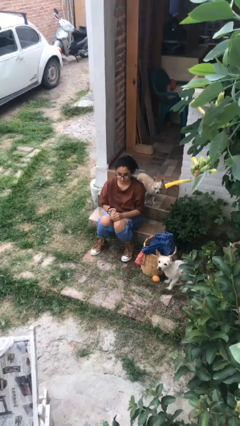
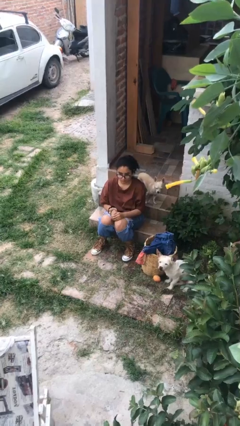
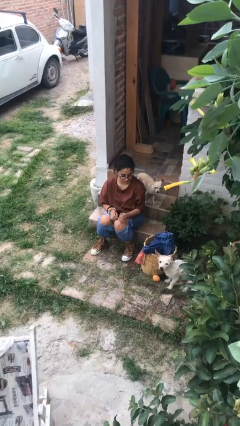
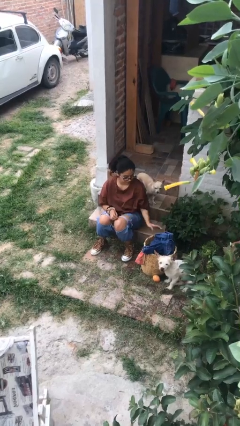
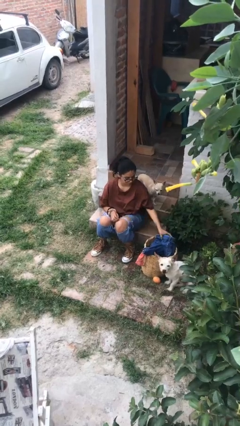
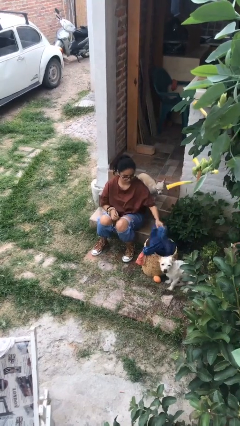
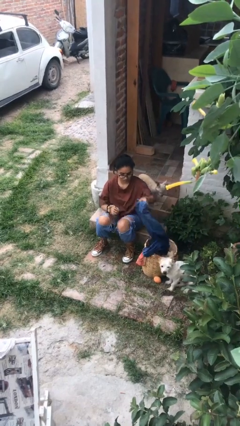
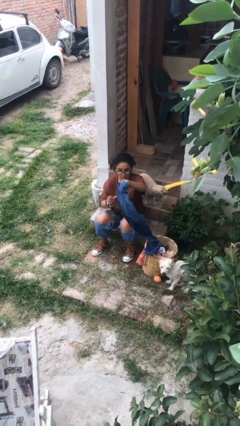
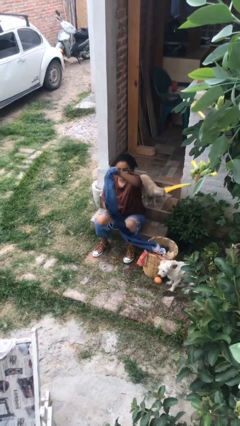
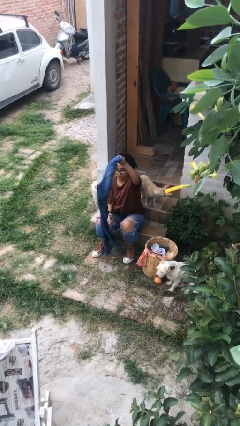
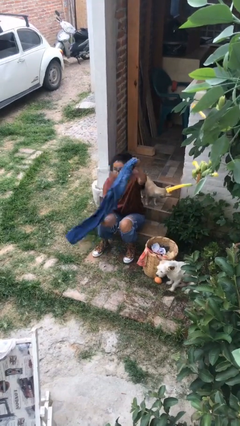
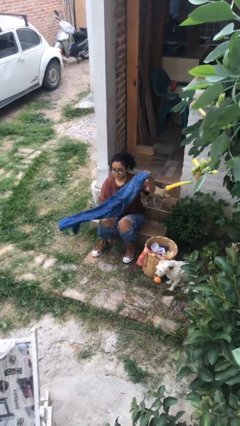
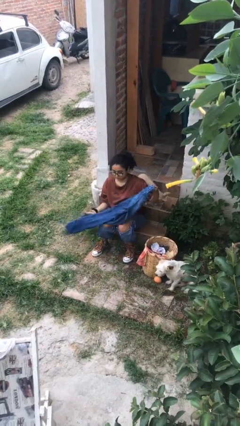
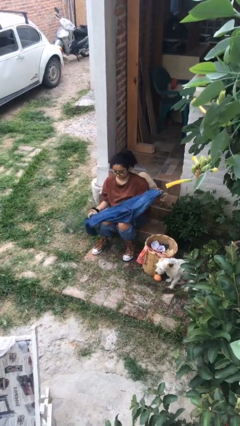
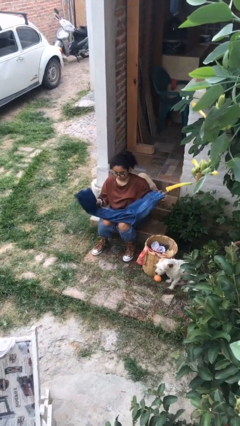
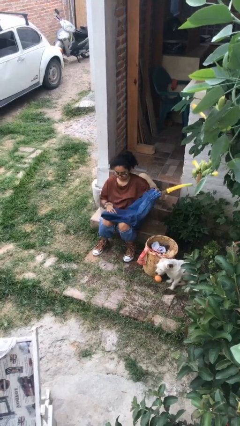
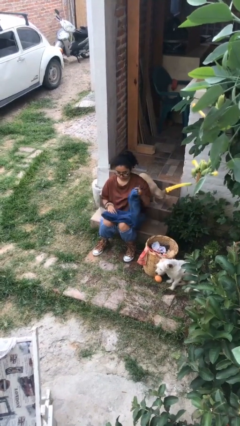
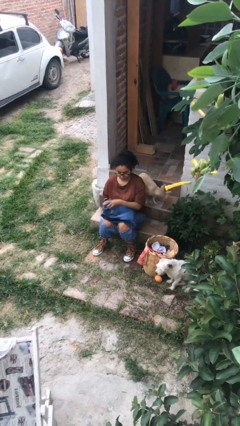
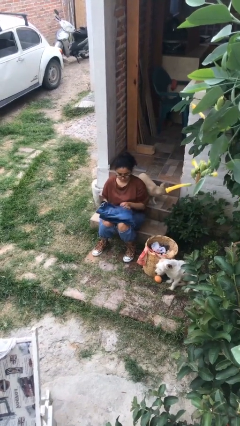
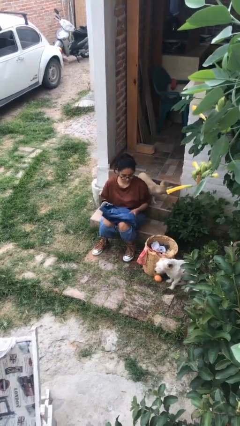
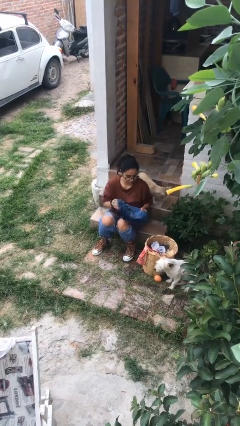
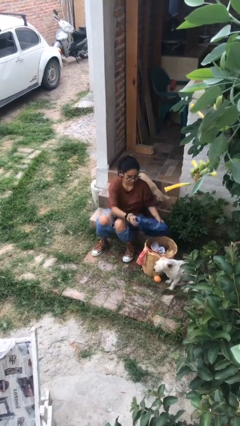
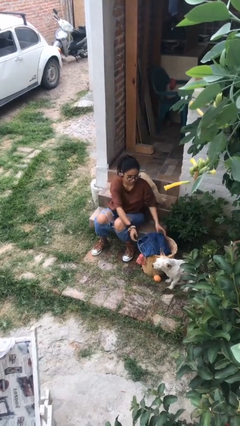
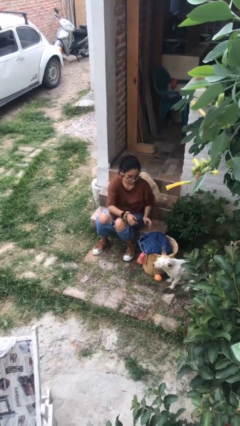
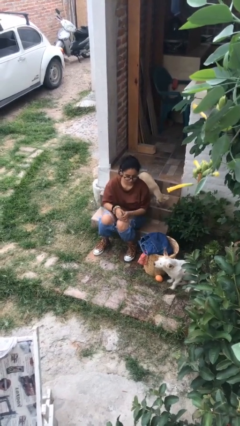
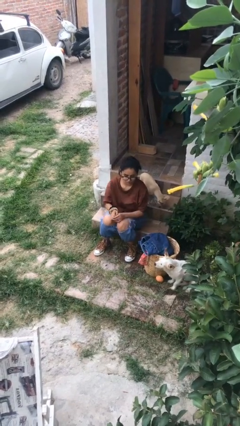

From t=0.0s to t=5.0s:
person folds pants

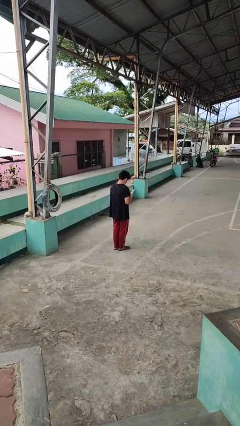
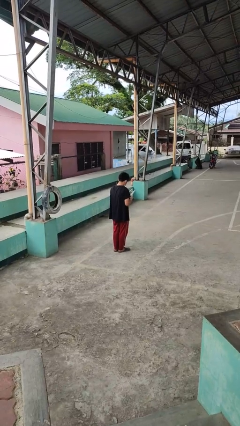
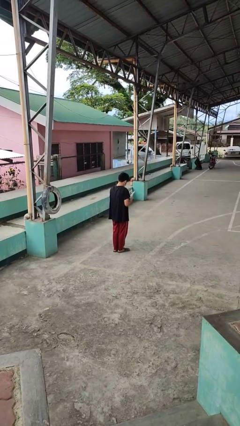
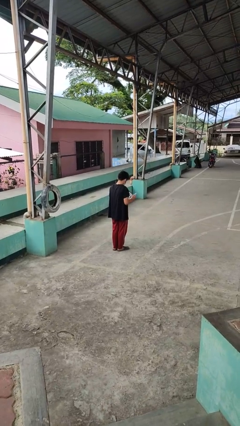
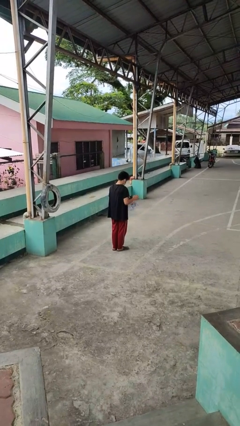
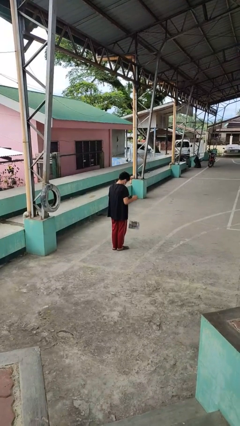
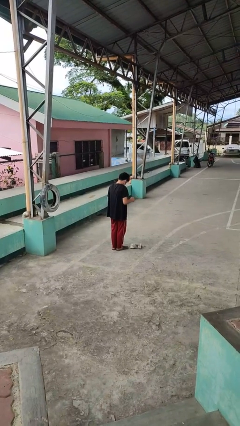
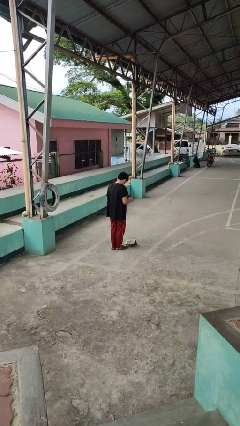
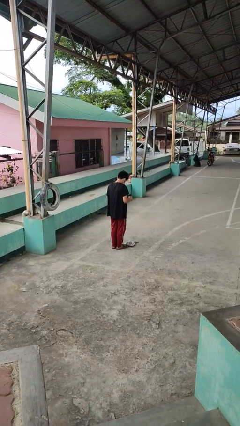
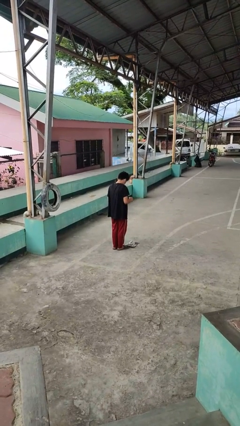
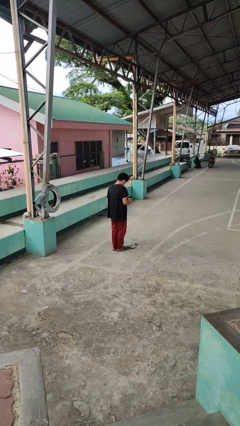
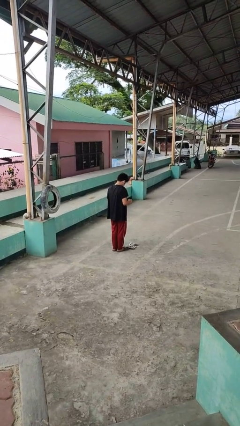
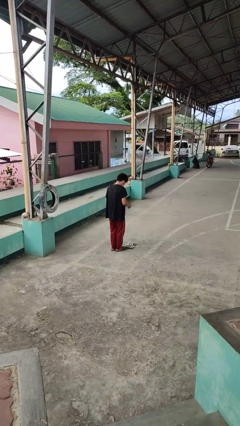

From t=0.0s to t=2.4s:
person drops object

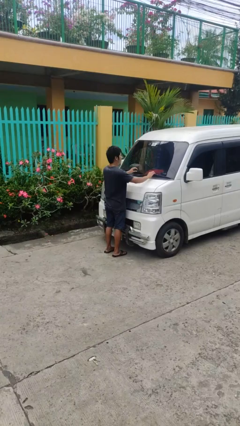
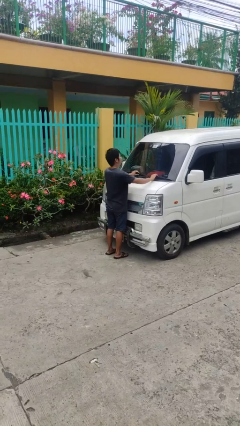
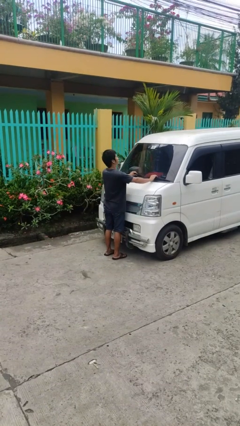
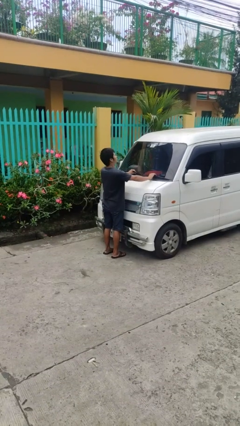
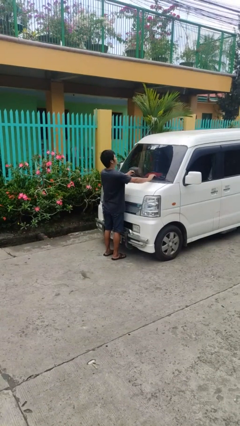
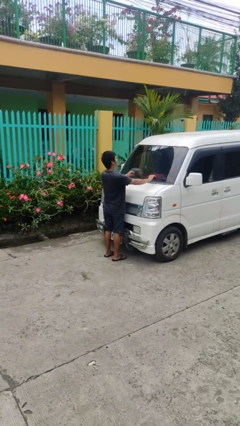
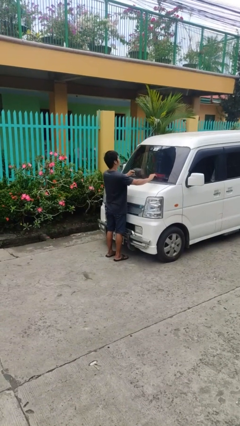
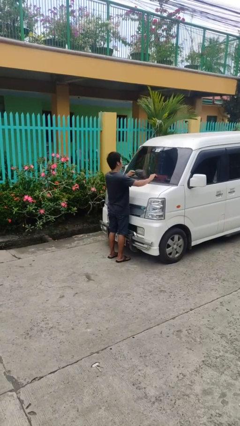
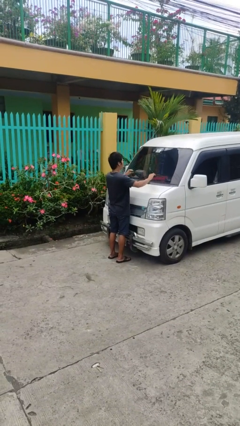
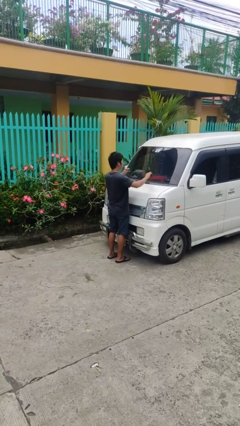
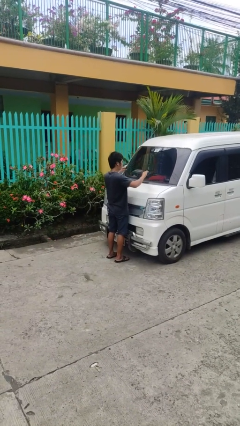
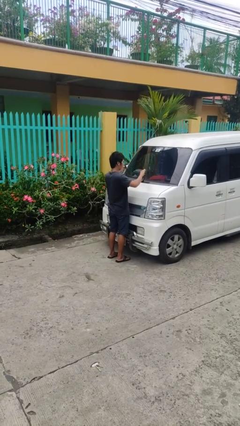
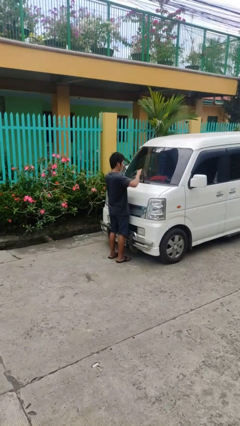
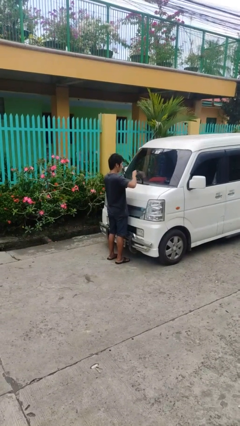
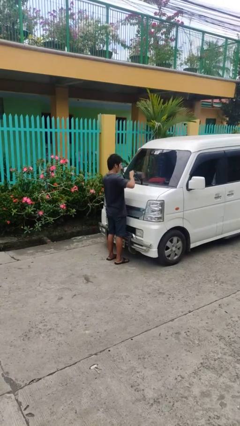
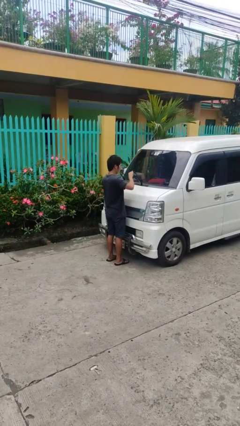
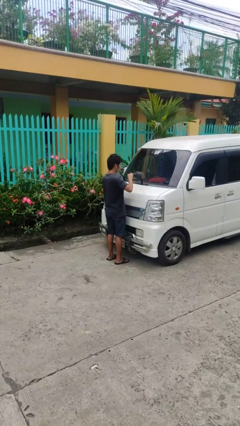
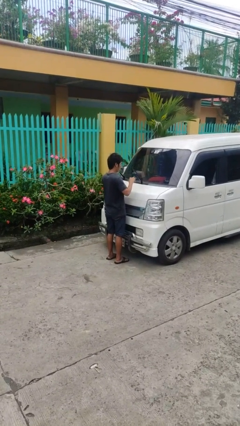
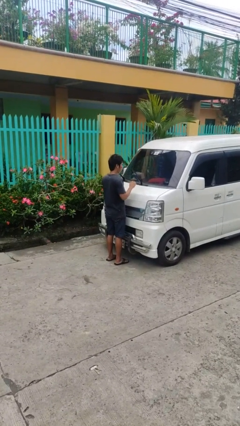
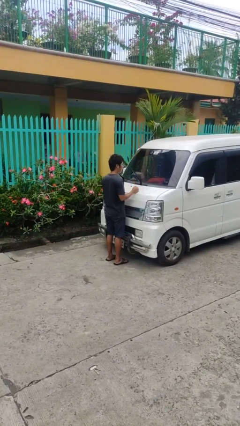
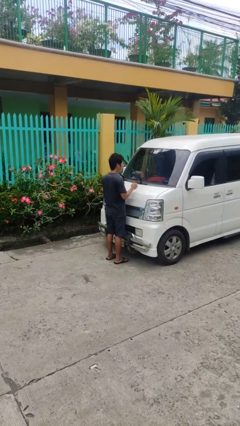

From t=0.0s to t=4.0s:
person flips up car wipers

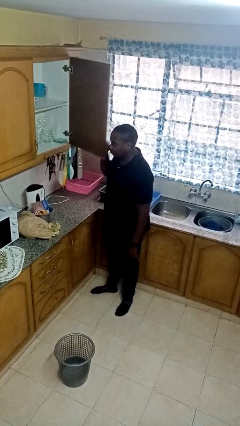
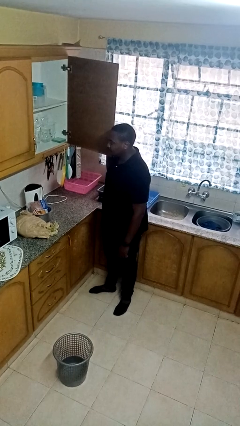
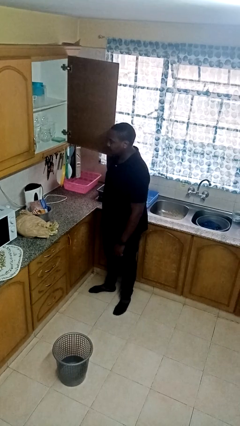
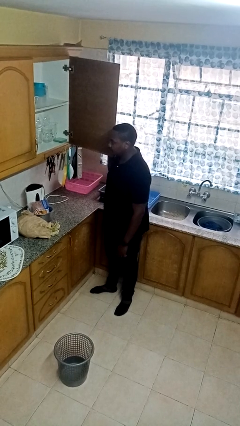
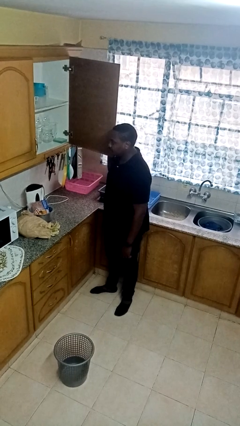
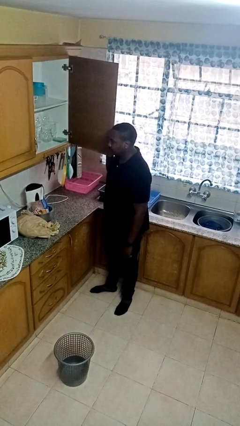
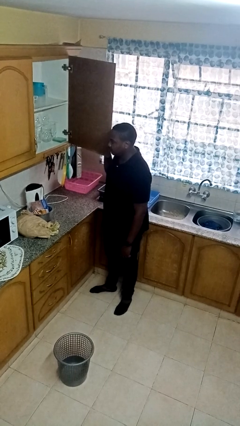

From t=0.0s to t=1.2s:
person opens cabinet

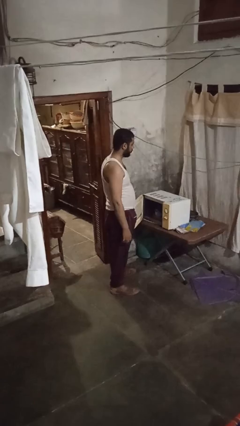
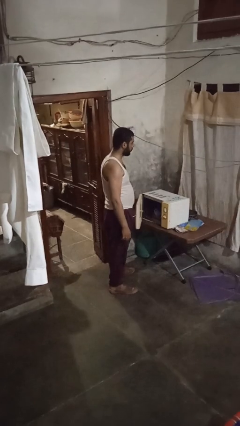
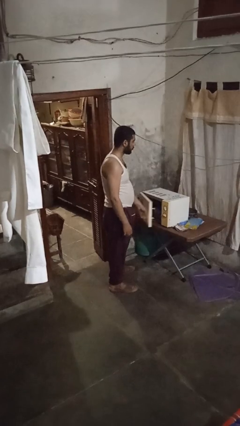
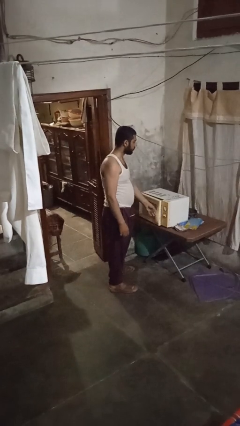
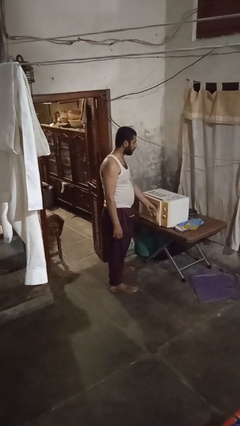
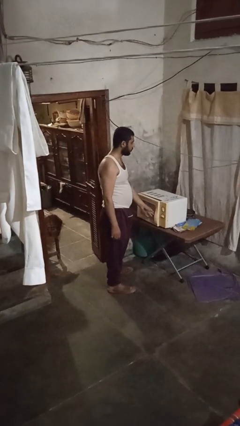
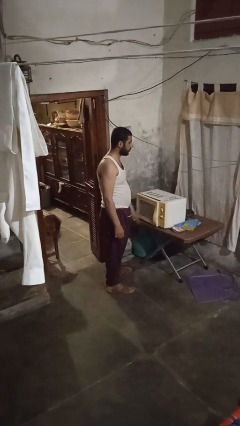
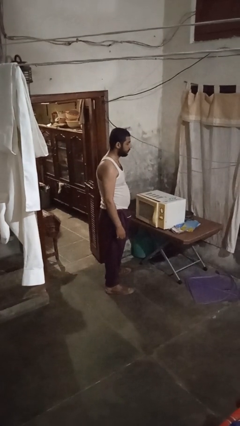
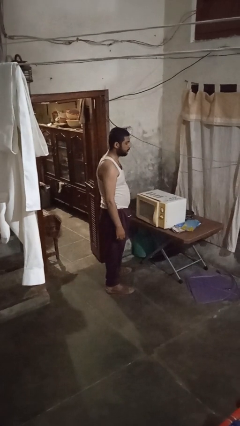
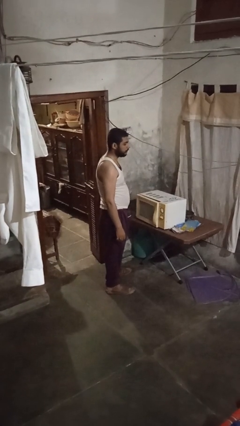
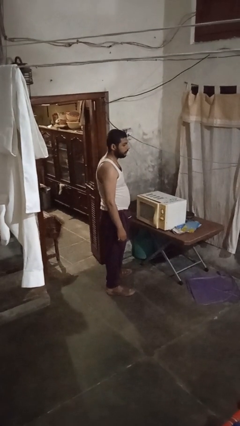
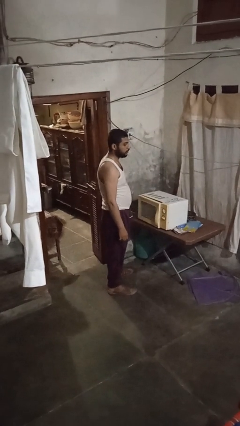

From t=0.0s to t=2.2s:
person closes microwave

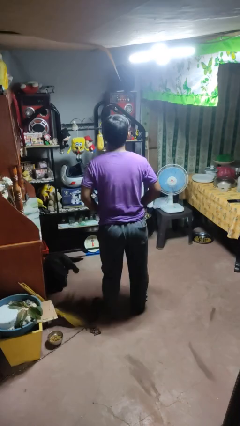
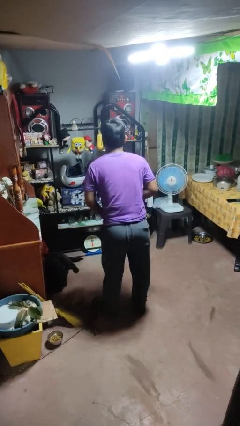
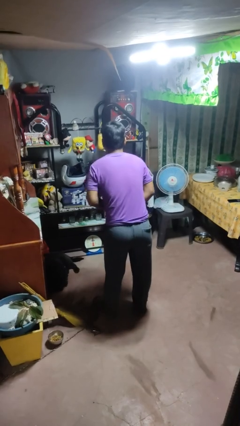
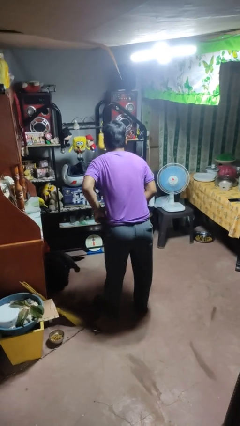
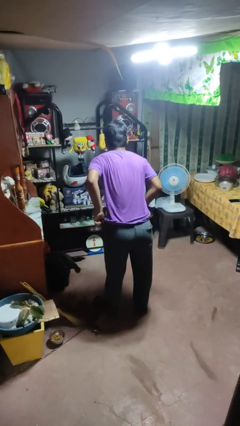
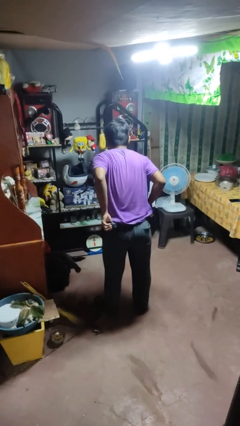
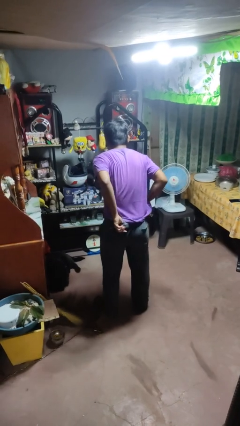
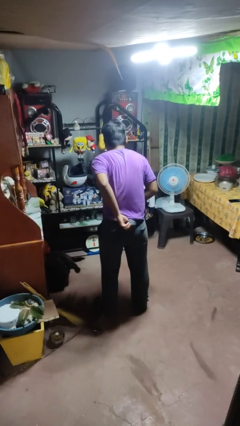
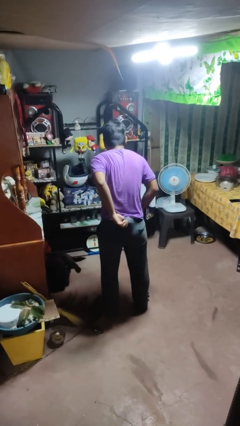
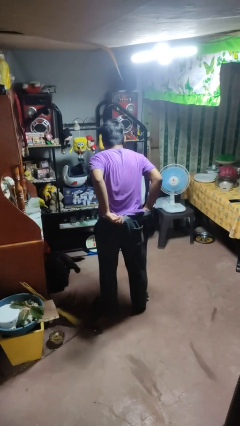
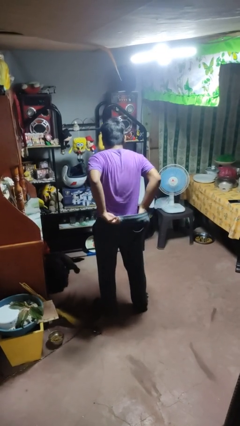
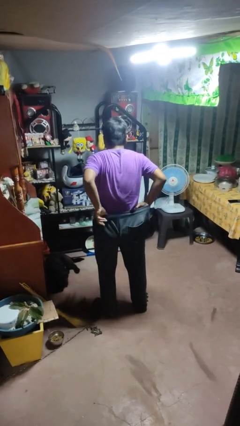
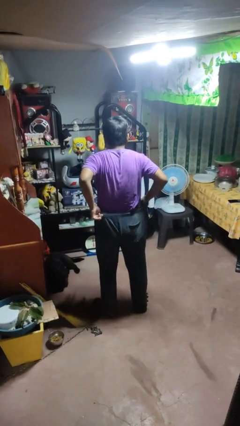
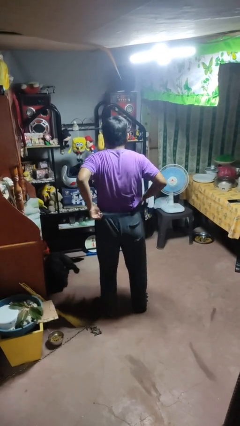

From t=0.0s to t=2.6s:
person tucks in shirt

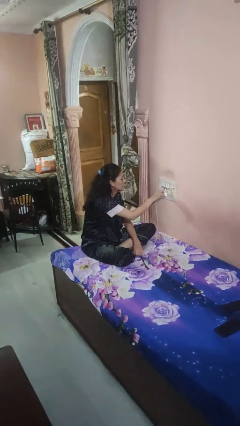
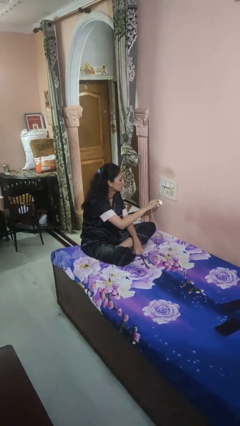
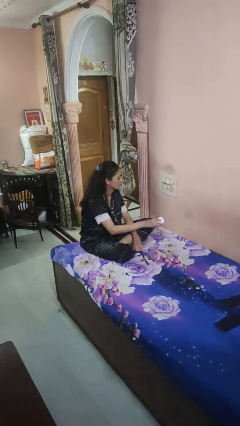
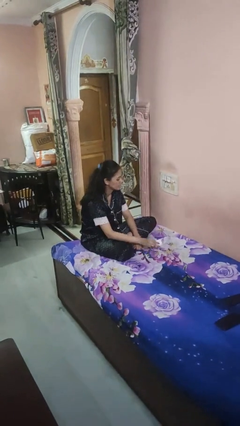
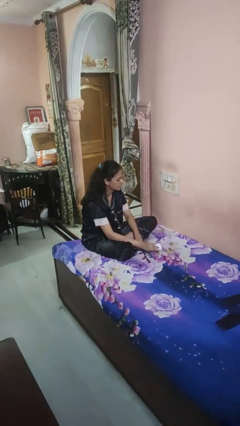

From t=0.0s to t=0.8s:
person unplugs from electrical socket
